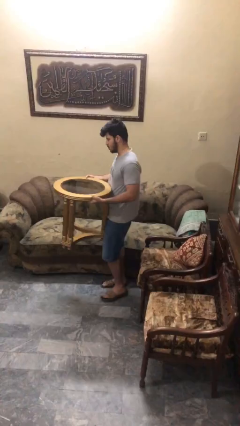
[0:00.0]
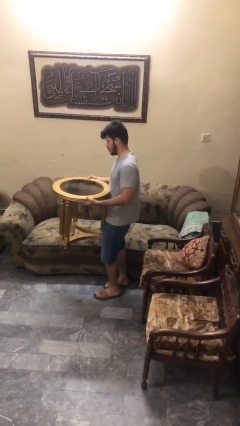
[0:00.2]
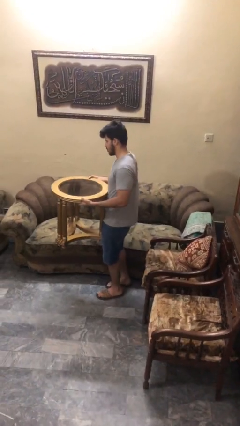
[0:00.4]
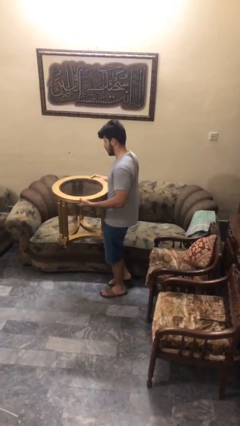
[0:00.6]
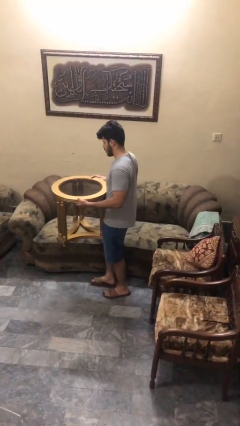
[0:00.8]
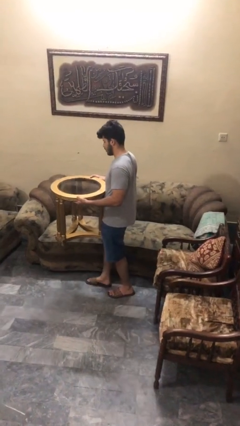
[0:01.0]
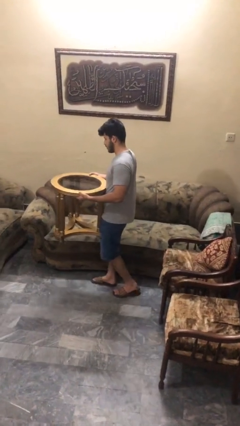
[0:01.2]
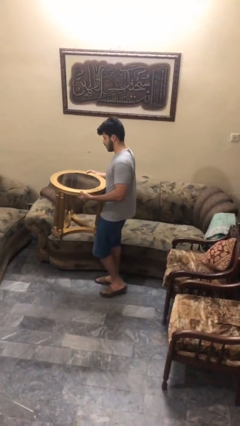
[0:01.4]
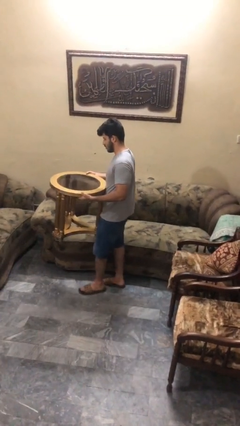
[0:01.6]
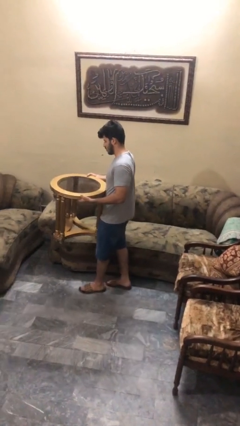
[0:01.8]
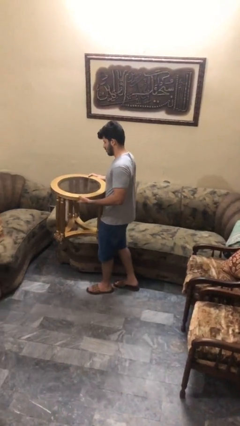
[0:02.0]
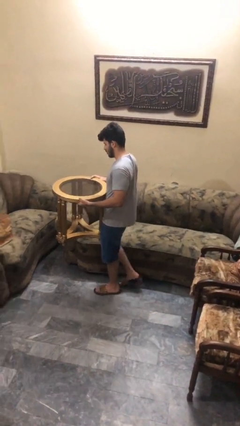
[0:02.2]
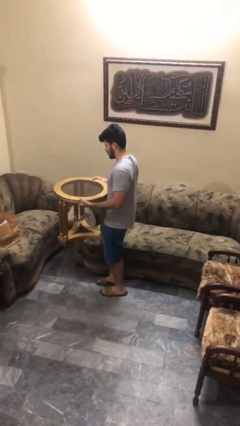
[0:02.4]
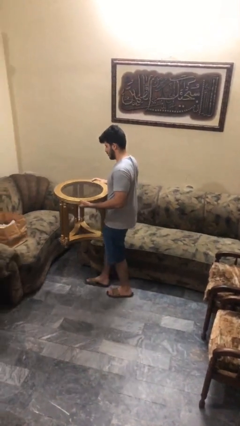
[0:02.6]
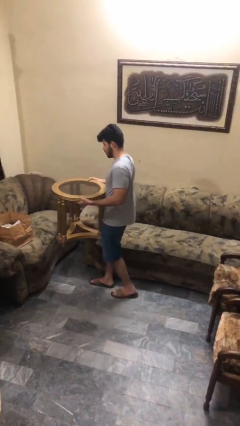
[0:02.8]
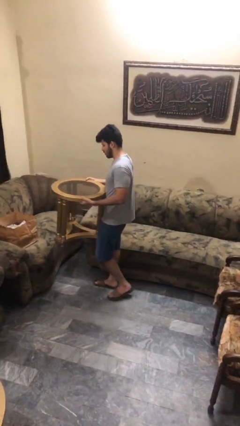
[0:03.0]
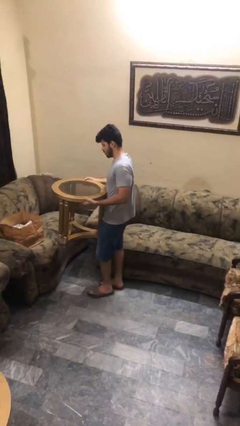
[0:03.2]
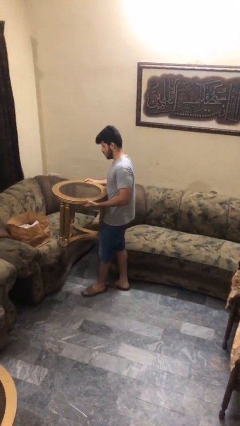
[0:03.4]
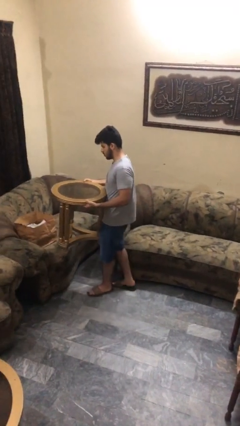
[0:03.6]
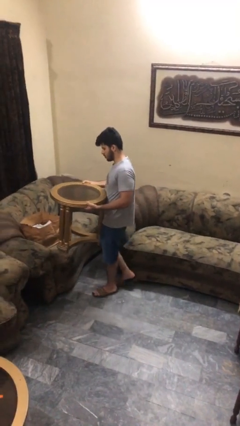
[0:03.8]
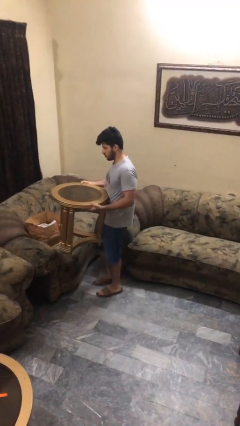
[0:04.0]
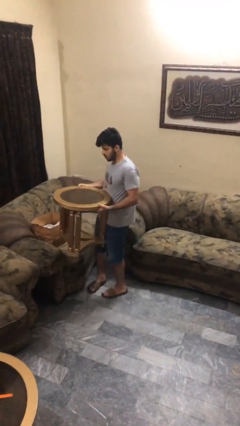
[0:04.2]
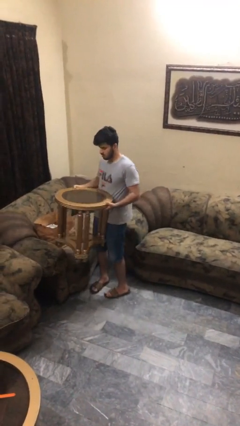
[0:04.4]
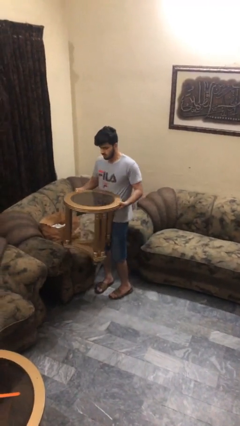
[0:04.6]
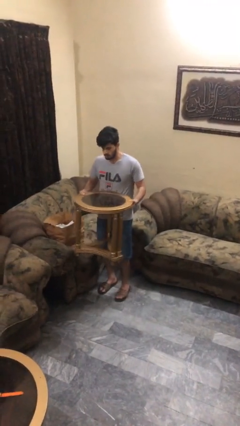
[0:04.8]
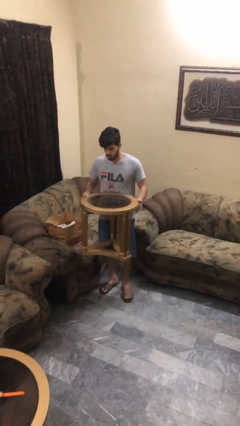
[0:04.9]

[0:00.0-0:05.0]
person carries furniture

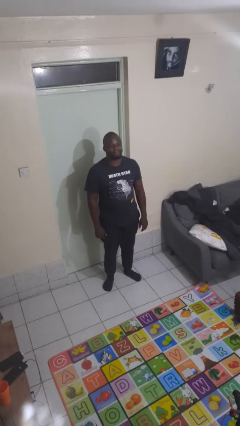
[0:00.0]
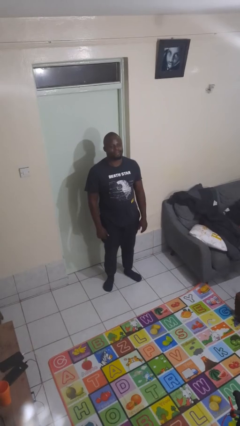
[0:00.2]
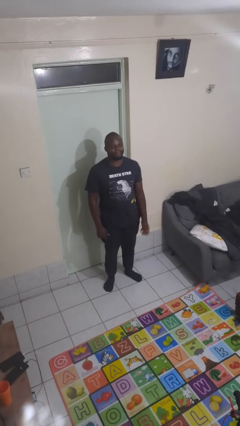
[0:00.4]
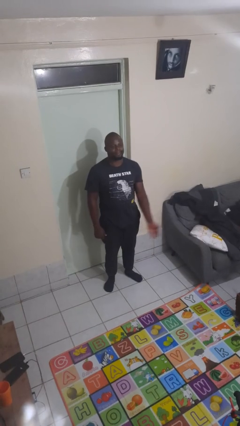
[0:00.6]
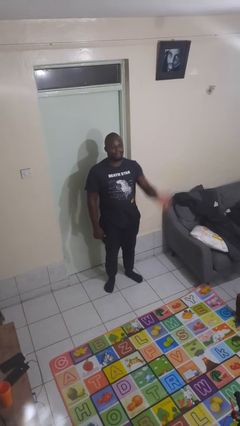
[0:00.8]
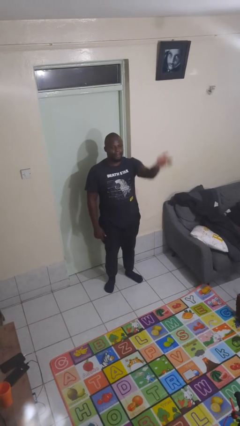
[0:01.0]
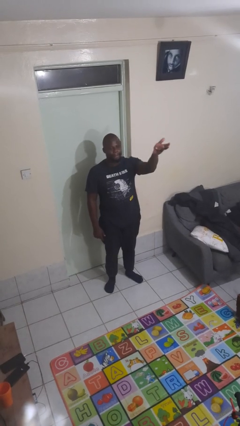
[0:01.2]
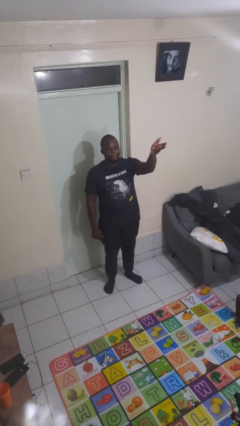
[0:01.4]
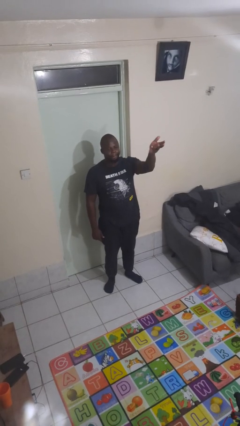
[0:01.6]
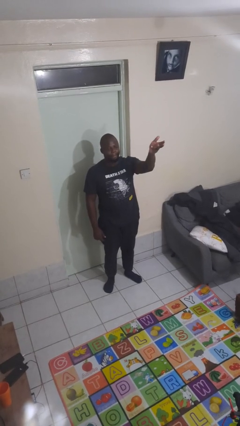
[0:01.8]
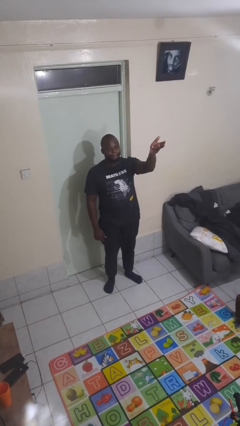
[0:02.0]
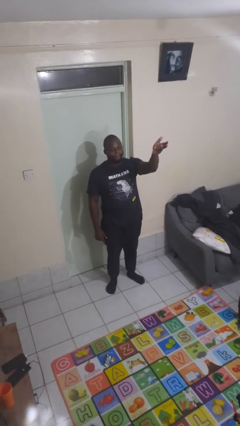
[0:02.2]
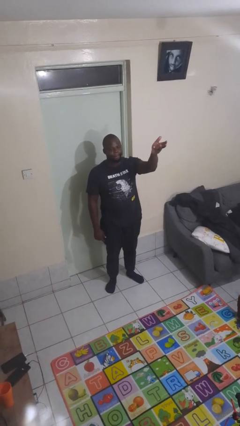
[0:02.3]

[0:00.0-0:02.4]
person gestures swipe up

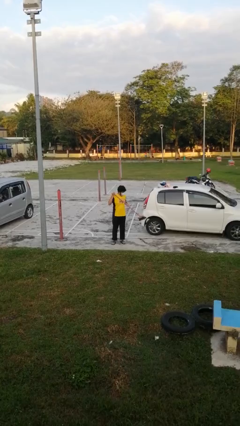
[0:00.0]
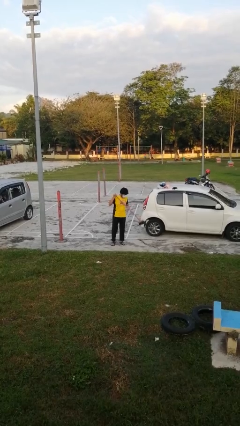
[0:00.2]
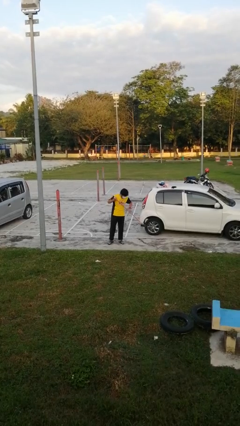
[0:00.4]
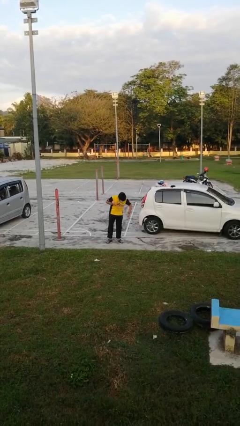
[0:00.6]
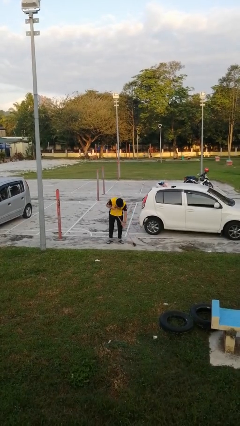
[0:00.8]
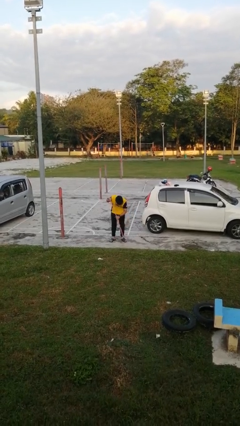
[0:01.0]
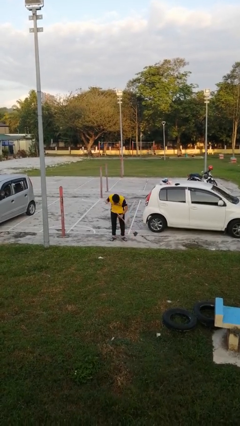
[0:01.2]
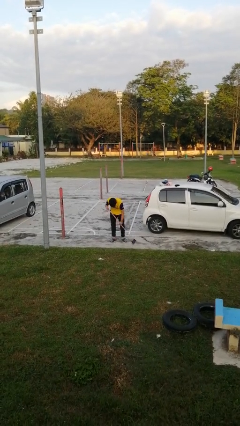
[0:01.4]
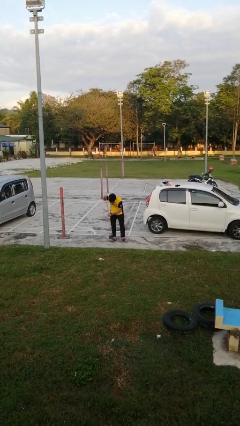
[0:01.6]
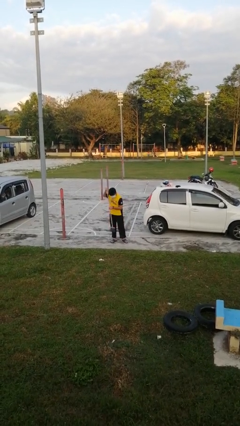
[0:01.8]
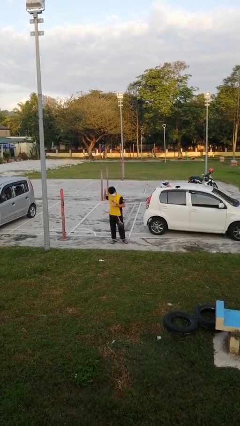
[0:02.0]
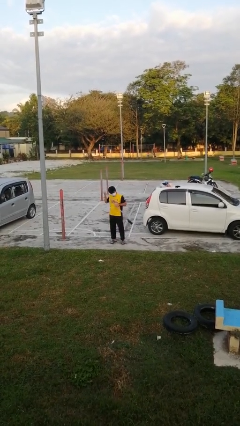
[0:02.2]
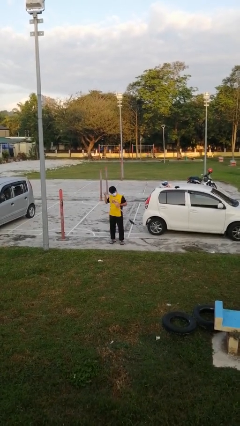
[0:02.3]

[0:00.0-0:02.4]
person sweeps floor

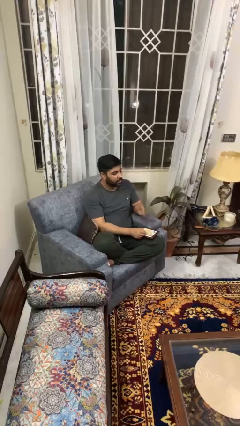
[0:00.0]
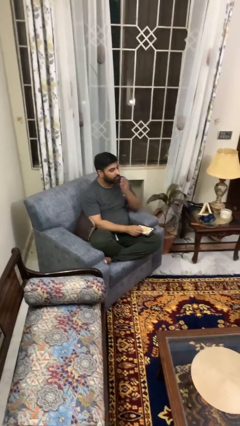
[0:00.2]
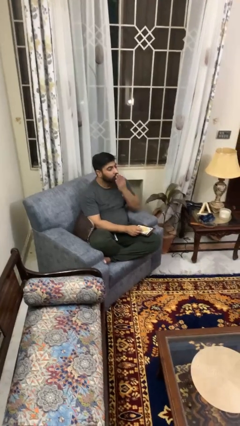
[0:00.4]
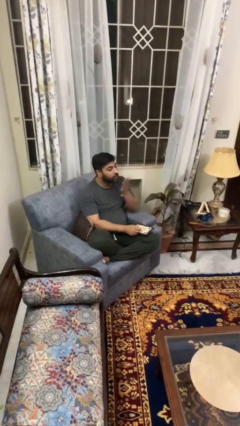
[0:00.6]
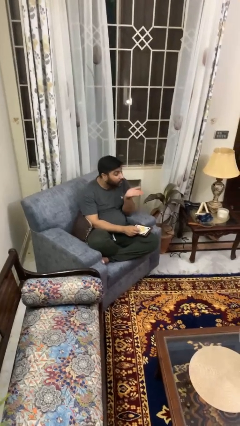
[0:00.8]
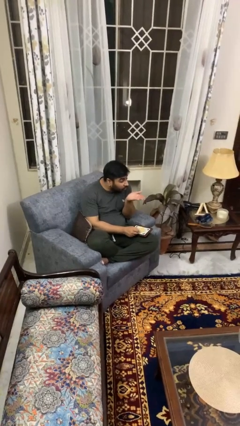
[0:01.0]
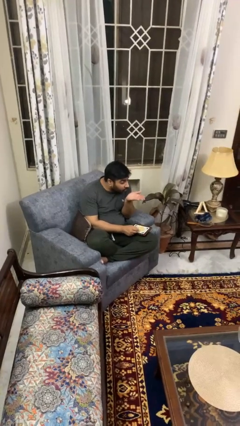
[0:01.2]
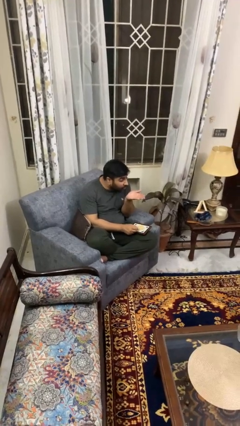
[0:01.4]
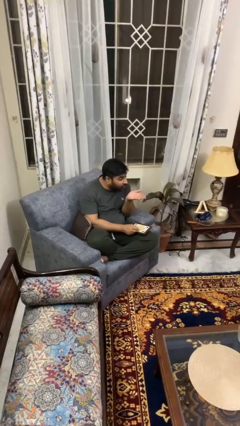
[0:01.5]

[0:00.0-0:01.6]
person gestures blow kiss

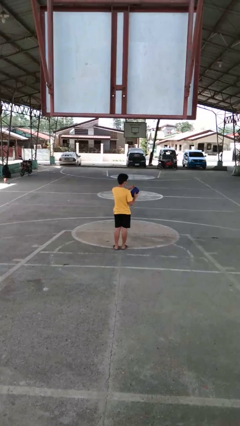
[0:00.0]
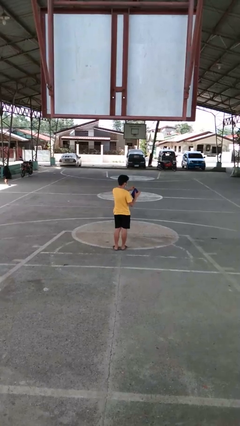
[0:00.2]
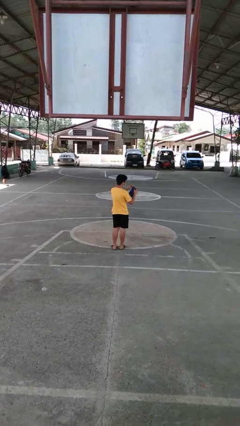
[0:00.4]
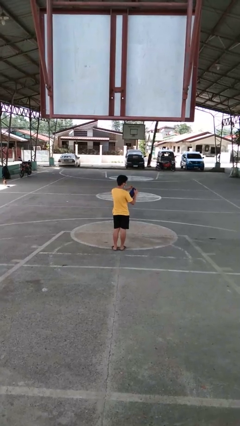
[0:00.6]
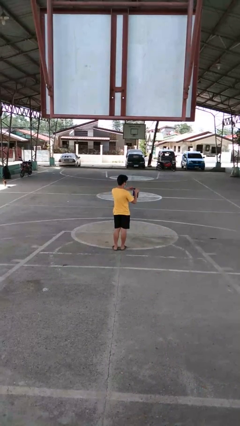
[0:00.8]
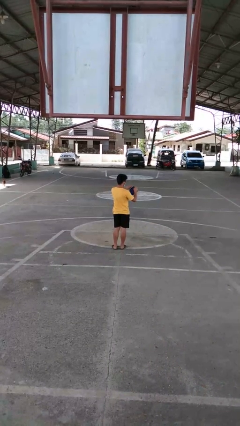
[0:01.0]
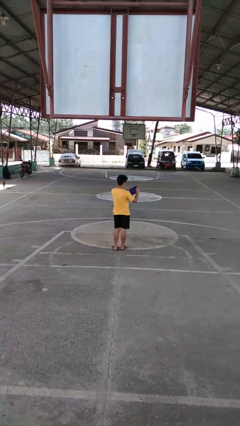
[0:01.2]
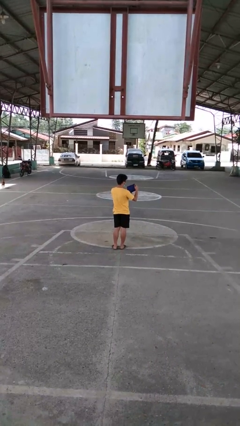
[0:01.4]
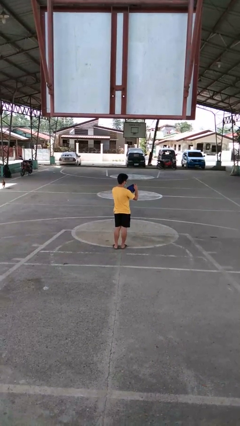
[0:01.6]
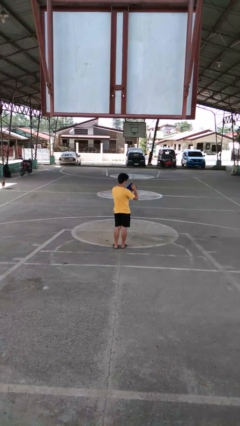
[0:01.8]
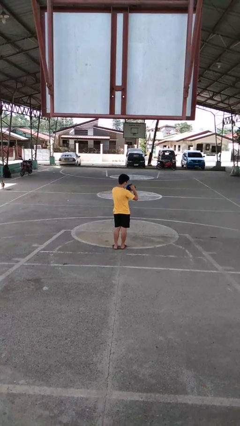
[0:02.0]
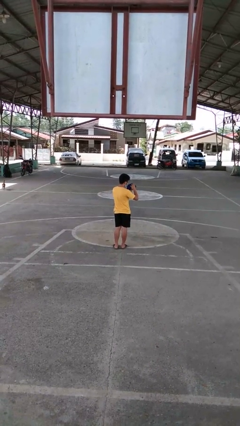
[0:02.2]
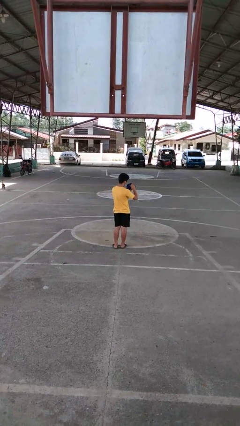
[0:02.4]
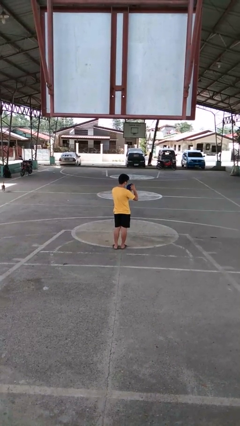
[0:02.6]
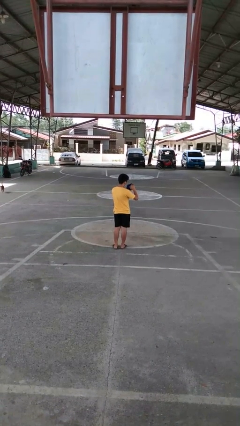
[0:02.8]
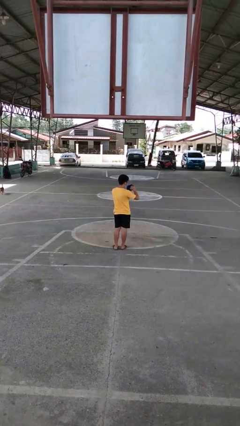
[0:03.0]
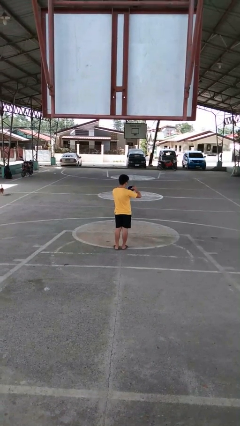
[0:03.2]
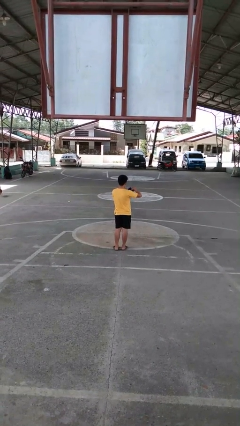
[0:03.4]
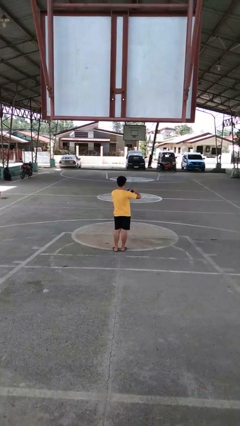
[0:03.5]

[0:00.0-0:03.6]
person searches in purse

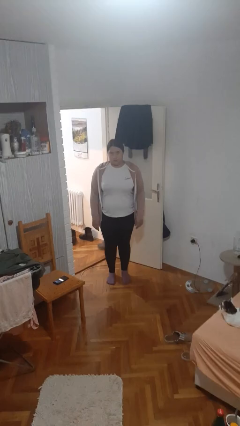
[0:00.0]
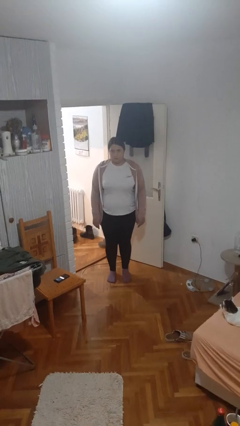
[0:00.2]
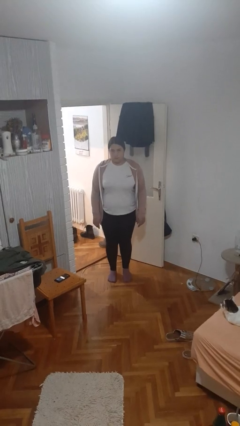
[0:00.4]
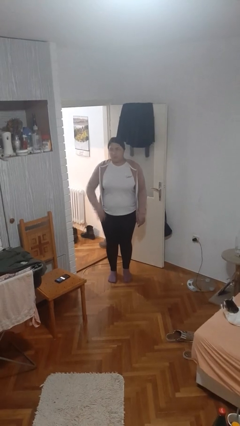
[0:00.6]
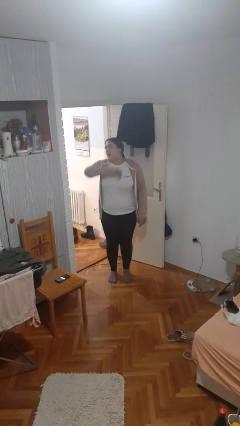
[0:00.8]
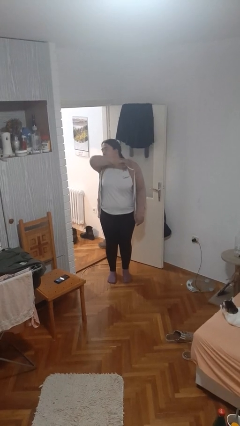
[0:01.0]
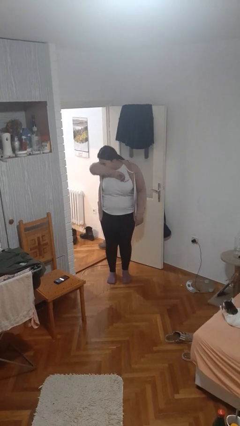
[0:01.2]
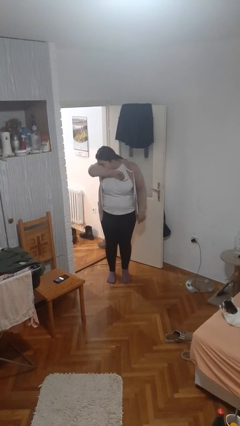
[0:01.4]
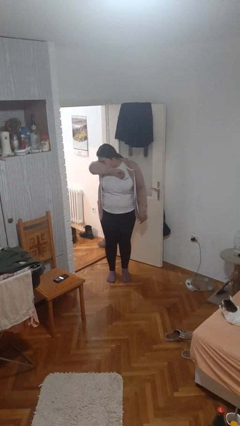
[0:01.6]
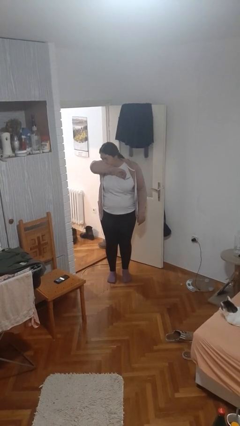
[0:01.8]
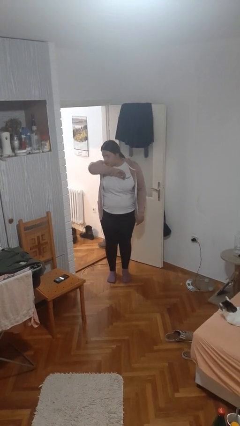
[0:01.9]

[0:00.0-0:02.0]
person sneezes into arm

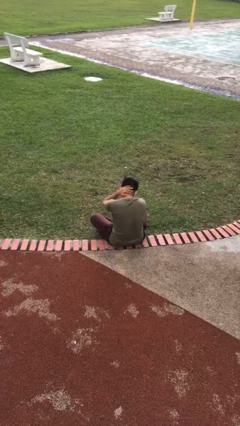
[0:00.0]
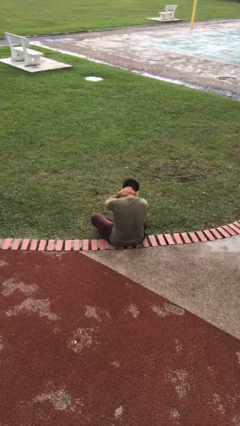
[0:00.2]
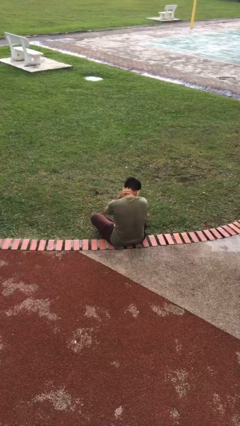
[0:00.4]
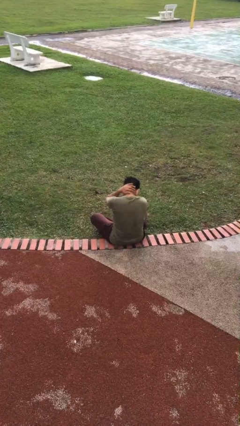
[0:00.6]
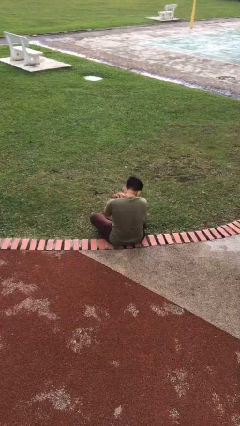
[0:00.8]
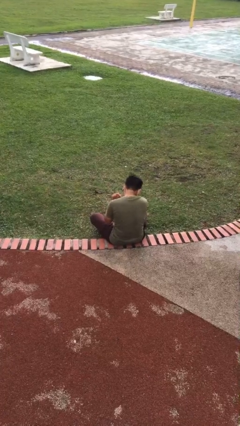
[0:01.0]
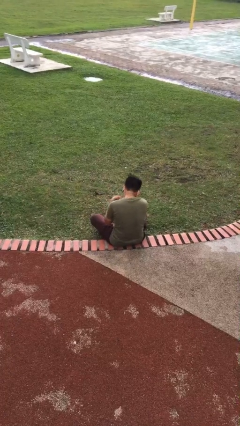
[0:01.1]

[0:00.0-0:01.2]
person rubs neck
